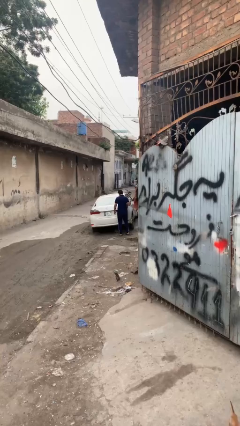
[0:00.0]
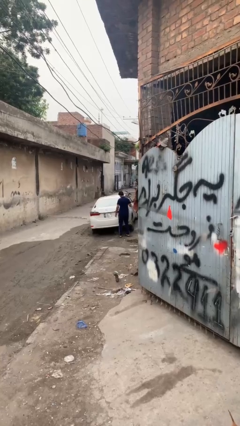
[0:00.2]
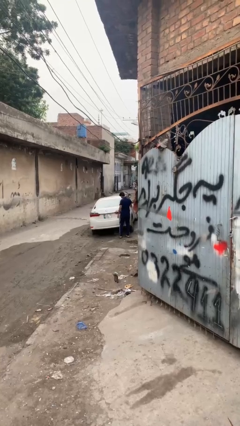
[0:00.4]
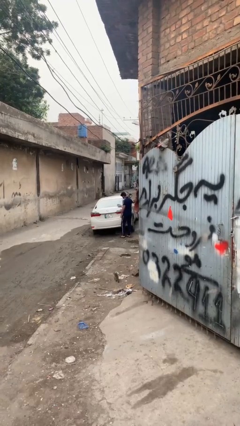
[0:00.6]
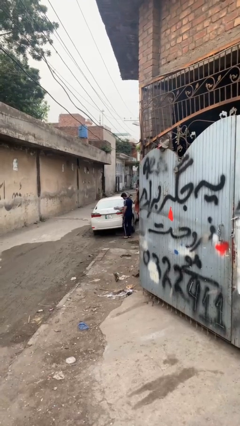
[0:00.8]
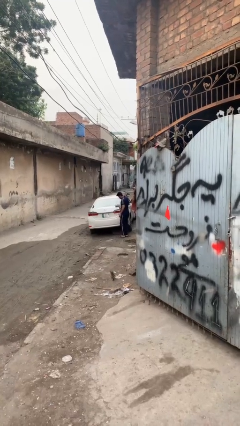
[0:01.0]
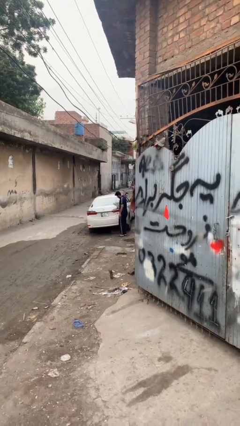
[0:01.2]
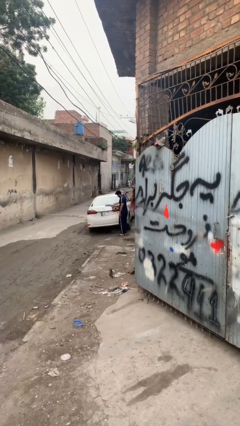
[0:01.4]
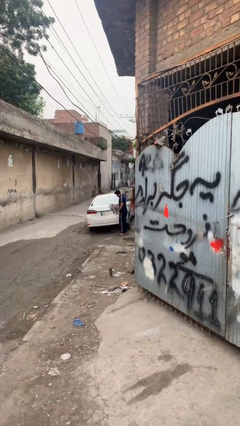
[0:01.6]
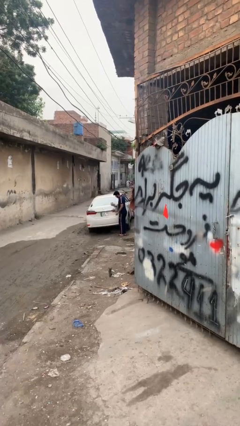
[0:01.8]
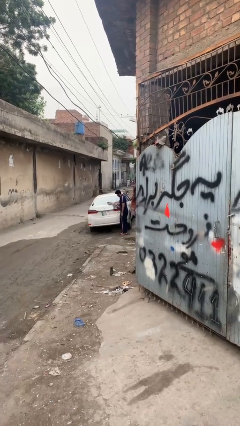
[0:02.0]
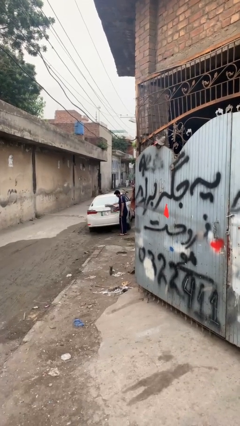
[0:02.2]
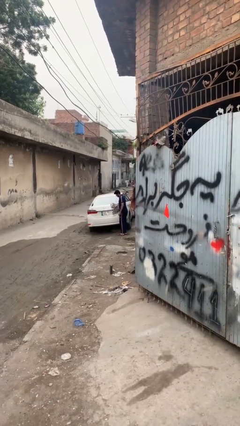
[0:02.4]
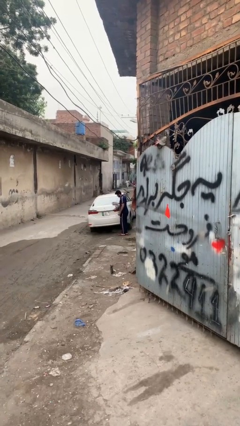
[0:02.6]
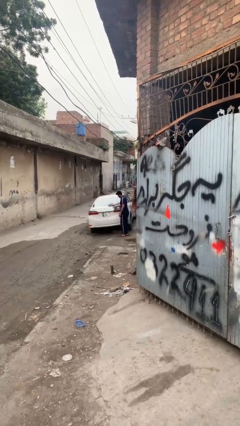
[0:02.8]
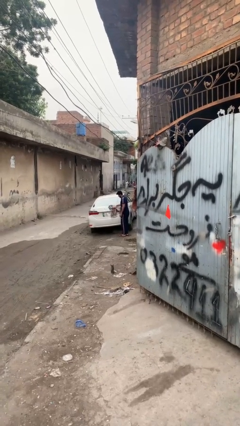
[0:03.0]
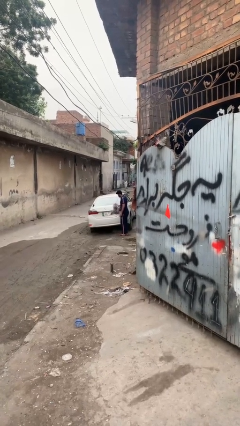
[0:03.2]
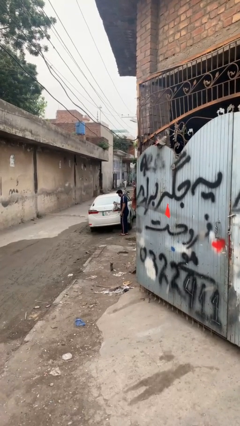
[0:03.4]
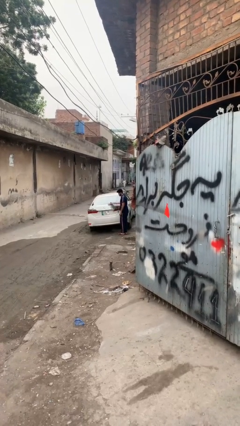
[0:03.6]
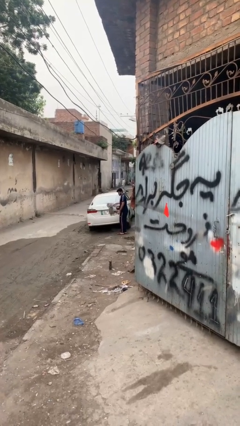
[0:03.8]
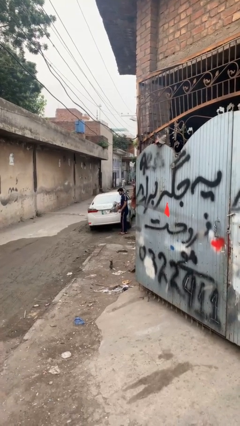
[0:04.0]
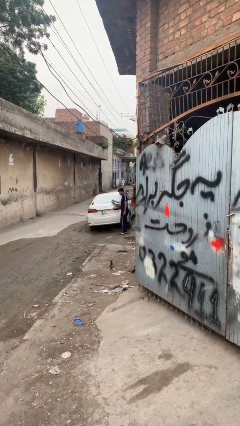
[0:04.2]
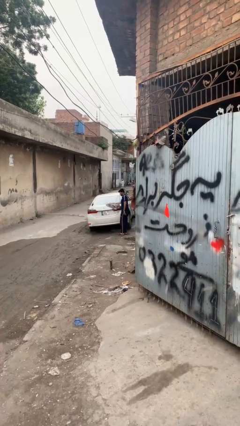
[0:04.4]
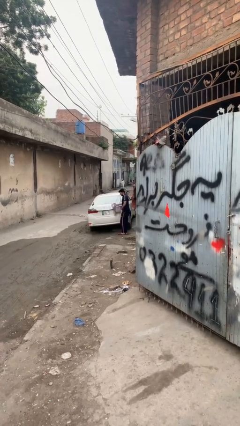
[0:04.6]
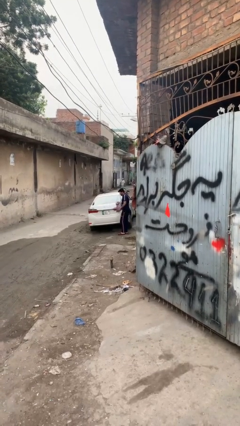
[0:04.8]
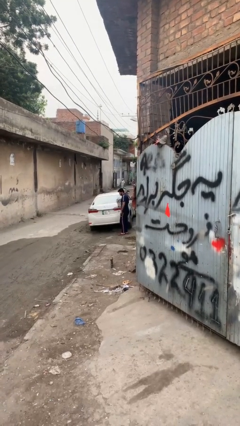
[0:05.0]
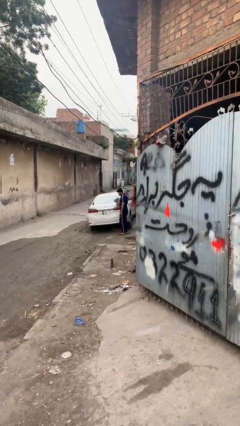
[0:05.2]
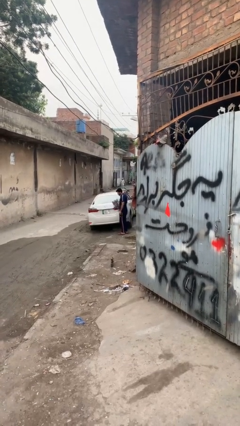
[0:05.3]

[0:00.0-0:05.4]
person polishes car with rag

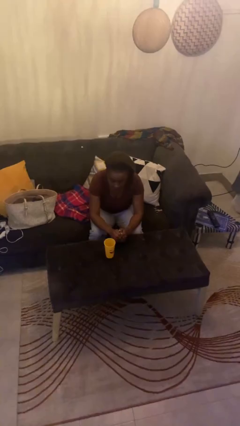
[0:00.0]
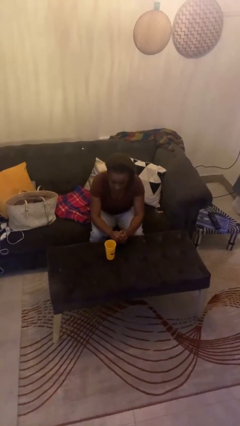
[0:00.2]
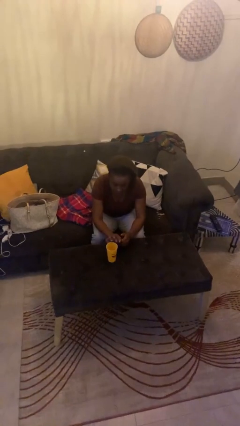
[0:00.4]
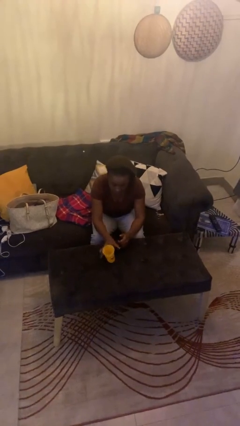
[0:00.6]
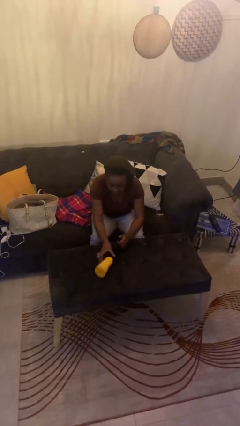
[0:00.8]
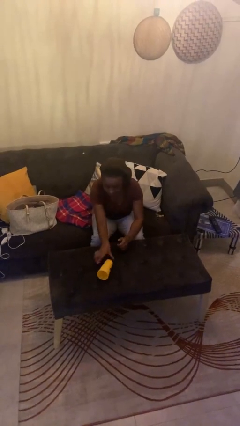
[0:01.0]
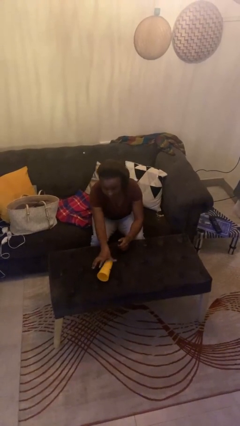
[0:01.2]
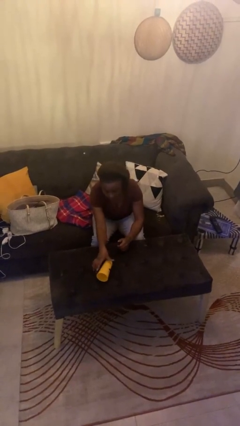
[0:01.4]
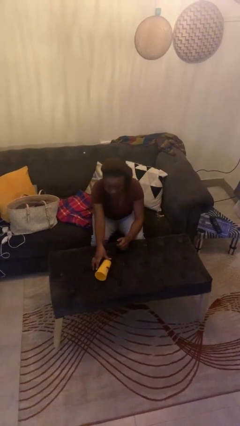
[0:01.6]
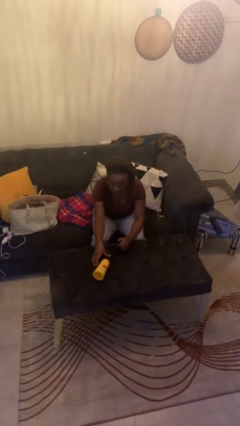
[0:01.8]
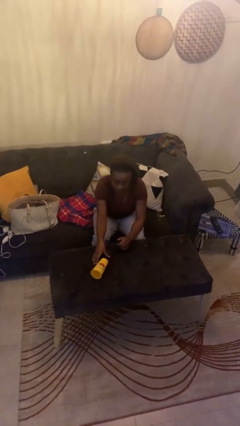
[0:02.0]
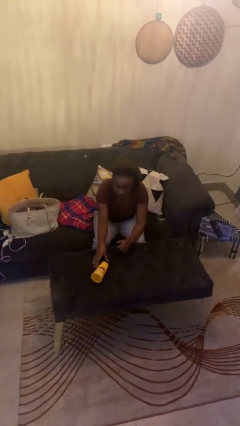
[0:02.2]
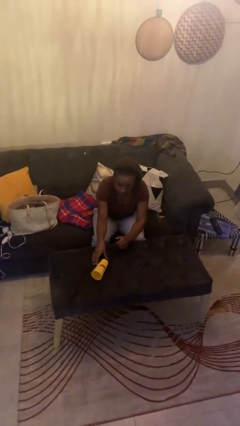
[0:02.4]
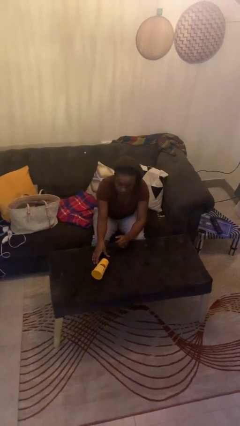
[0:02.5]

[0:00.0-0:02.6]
person knocks over glass

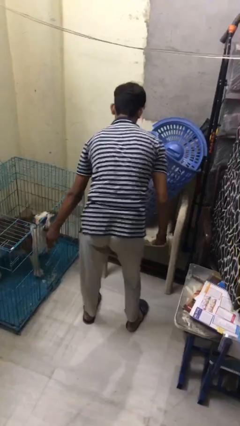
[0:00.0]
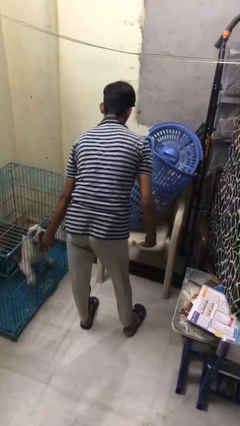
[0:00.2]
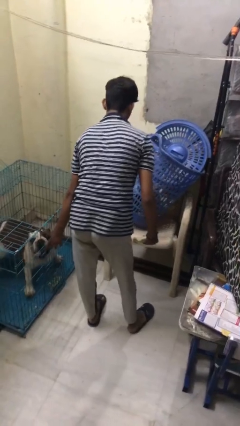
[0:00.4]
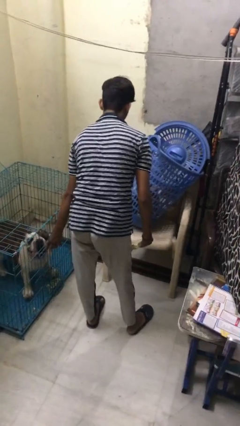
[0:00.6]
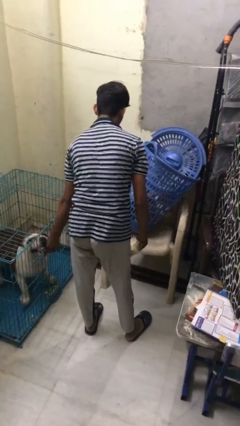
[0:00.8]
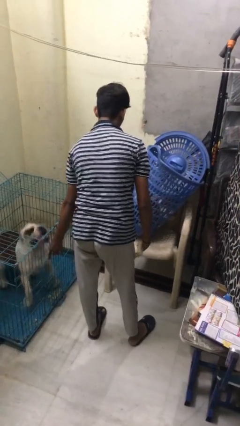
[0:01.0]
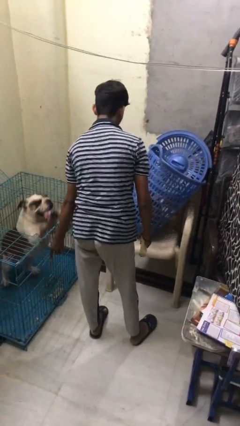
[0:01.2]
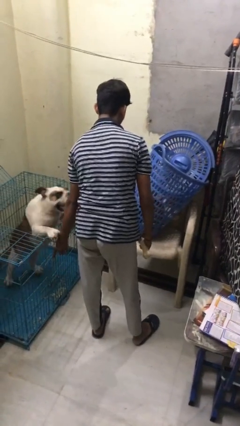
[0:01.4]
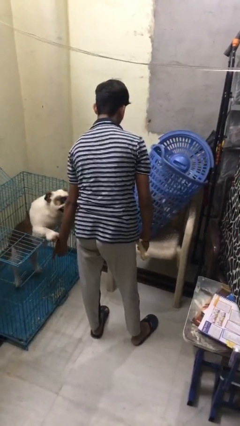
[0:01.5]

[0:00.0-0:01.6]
person crates dog

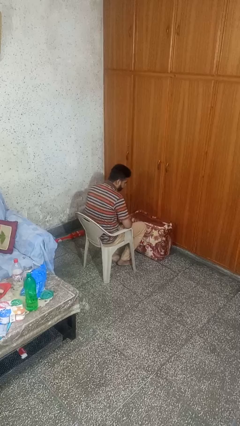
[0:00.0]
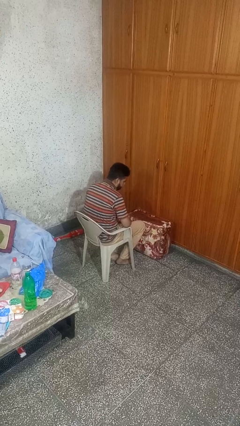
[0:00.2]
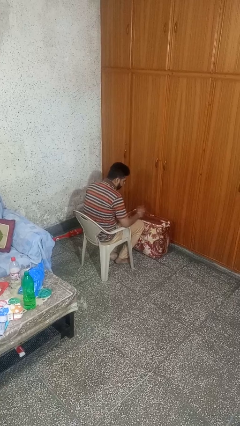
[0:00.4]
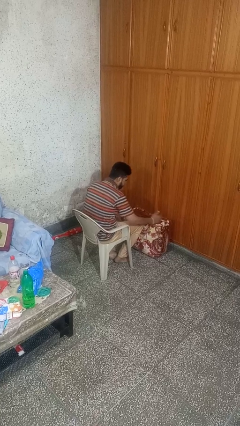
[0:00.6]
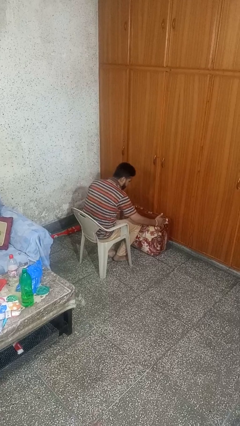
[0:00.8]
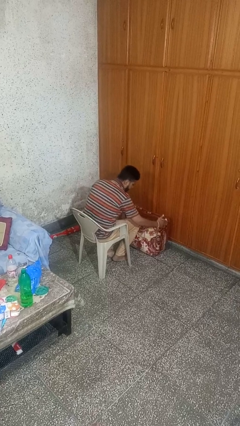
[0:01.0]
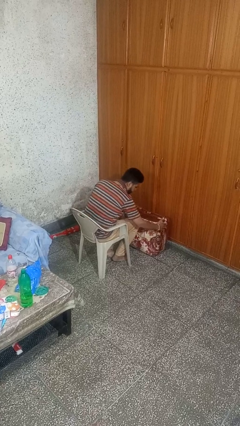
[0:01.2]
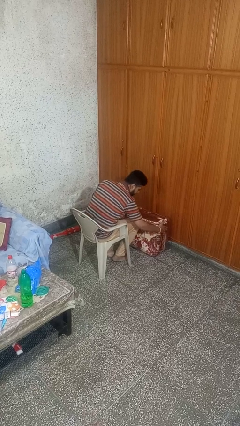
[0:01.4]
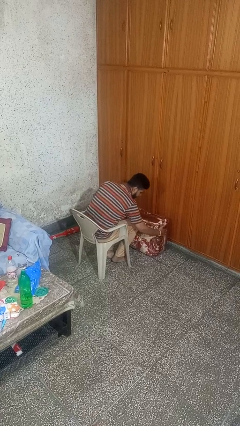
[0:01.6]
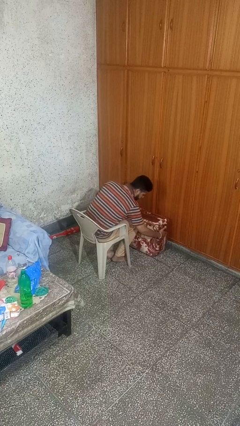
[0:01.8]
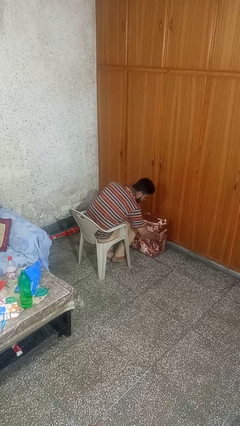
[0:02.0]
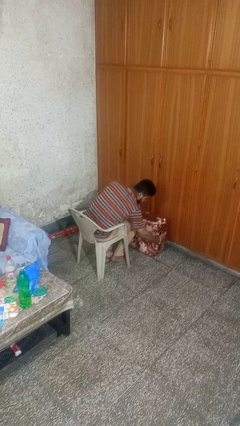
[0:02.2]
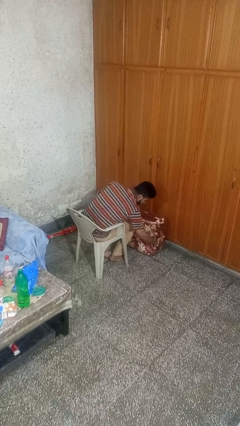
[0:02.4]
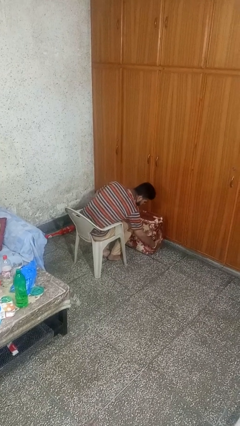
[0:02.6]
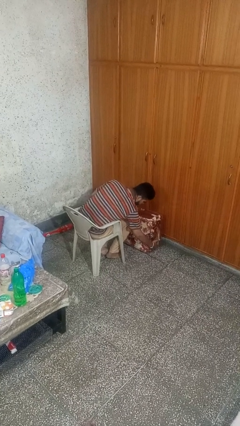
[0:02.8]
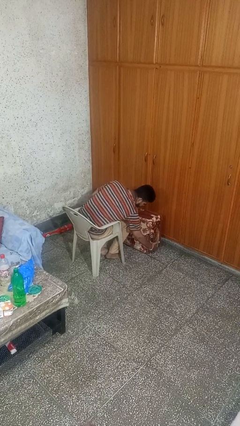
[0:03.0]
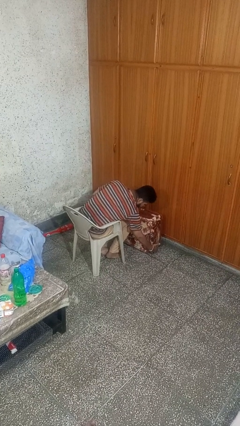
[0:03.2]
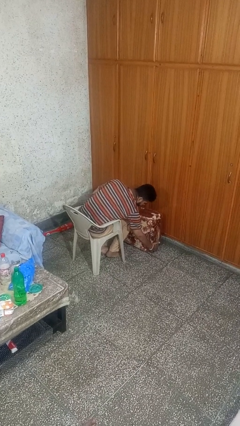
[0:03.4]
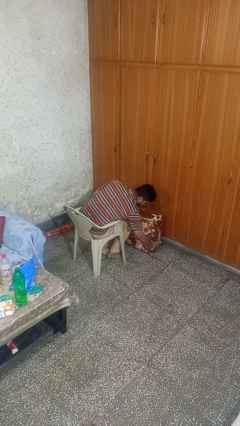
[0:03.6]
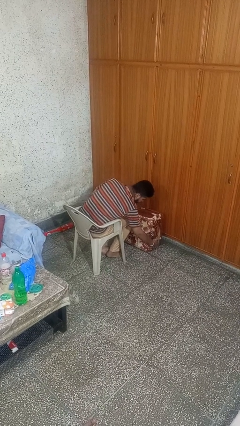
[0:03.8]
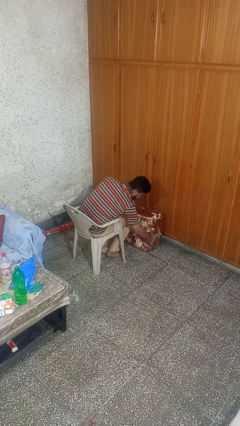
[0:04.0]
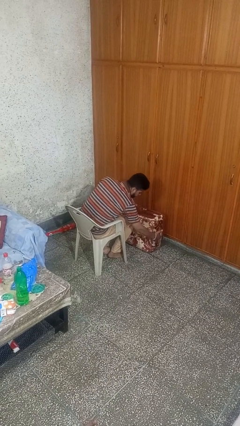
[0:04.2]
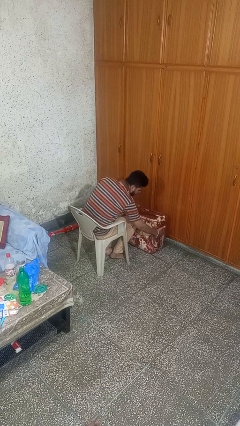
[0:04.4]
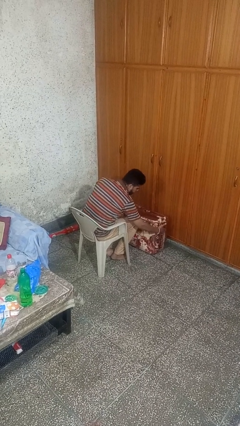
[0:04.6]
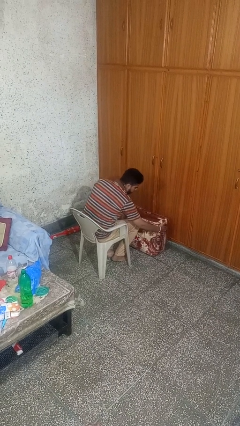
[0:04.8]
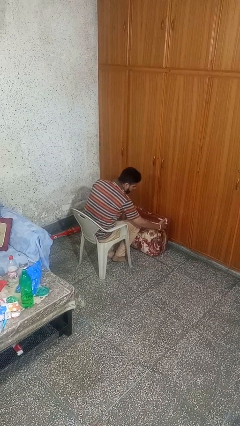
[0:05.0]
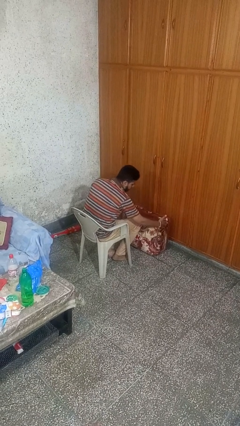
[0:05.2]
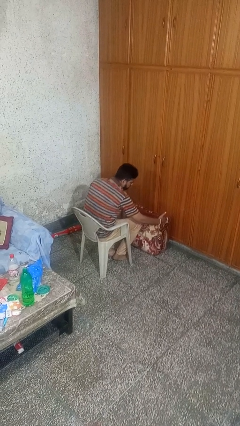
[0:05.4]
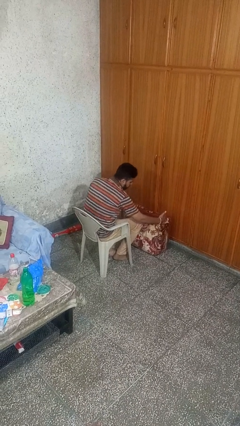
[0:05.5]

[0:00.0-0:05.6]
person waves hand over object

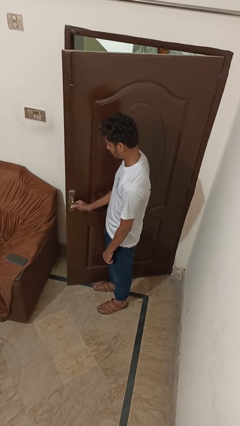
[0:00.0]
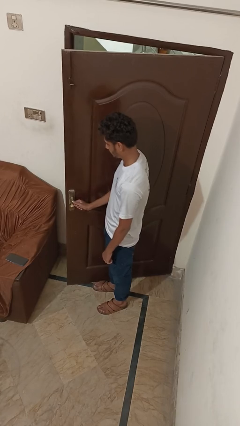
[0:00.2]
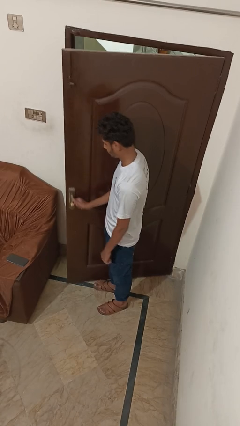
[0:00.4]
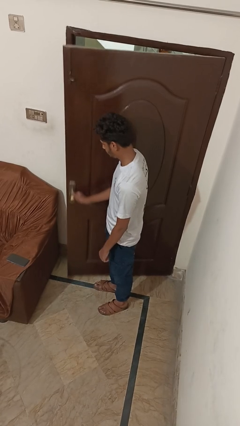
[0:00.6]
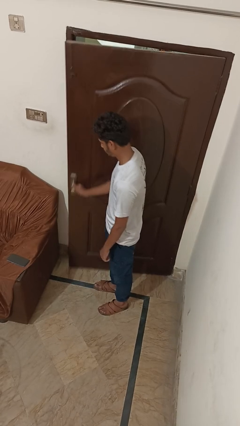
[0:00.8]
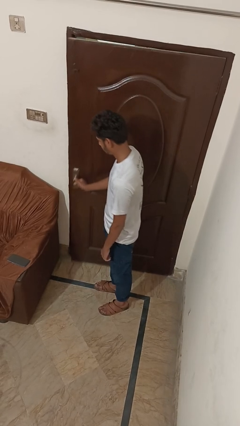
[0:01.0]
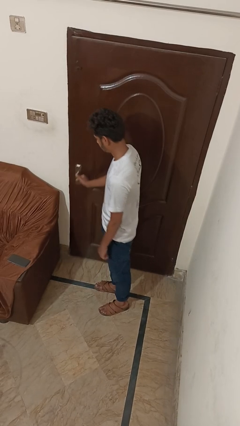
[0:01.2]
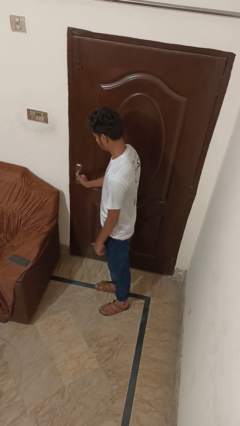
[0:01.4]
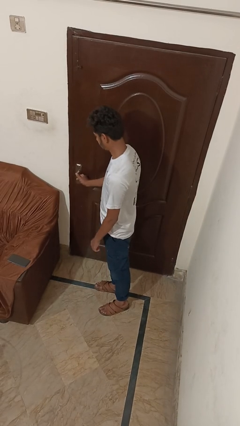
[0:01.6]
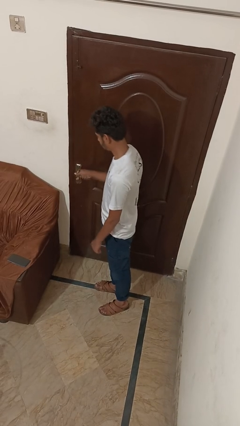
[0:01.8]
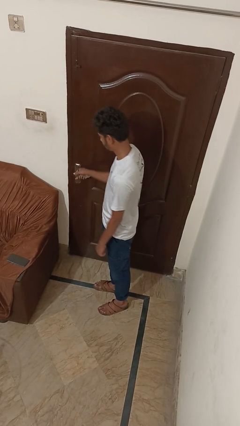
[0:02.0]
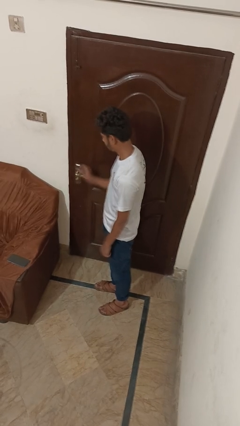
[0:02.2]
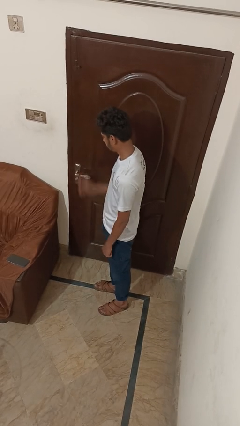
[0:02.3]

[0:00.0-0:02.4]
person closes facility door
